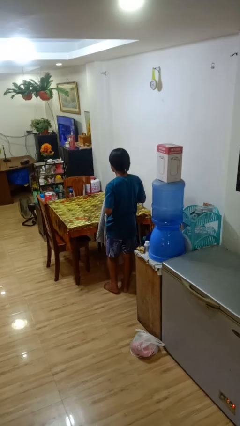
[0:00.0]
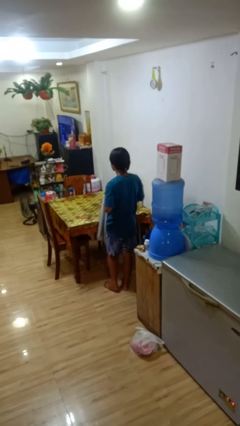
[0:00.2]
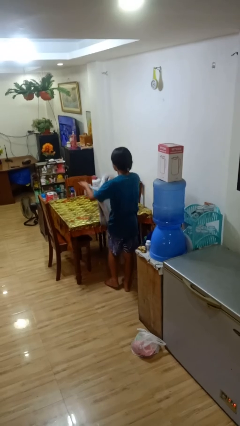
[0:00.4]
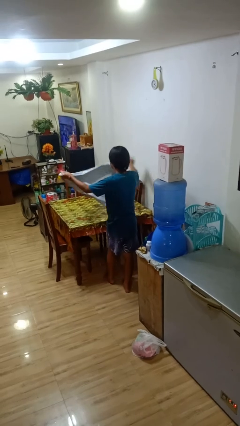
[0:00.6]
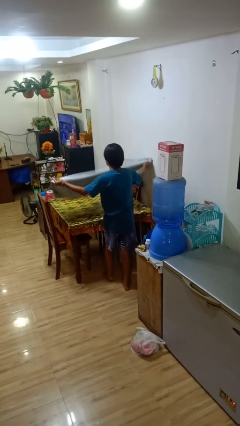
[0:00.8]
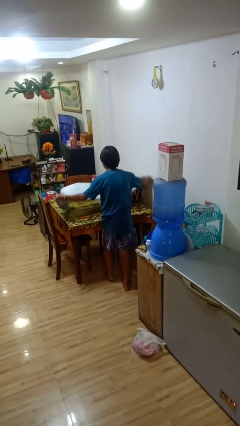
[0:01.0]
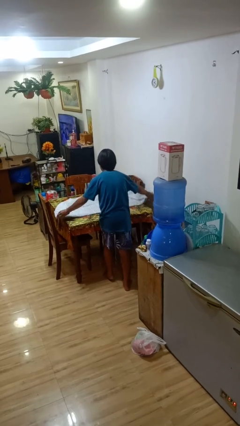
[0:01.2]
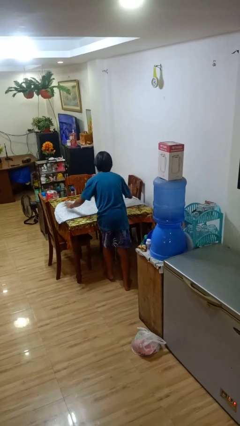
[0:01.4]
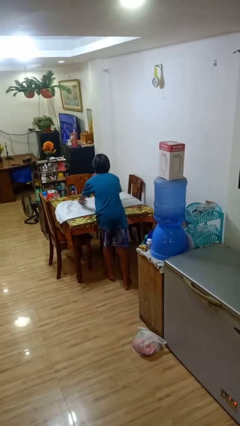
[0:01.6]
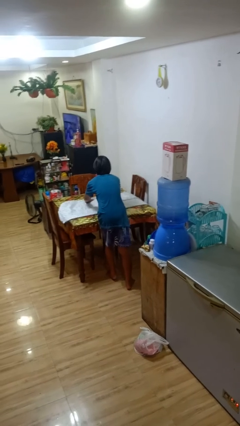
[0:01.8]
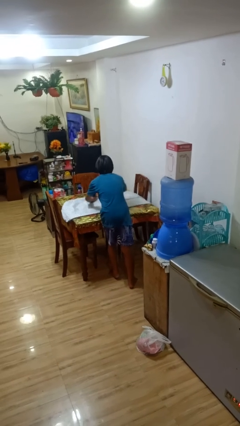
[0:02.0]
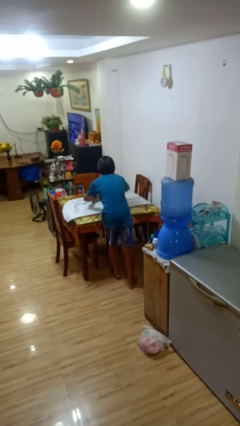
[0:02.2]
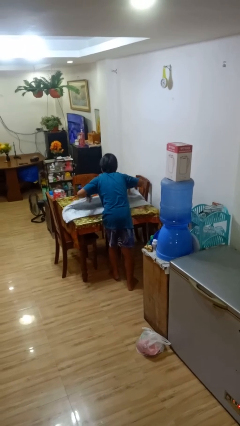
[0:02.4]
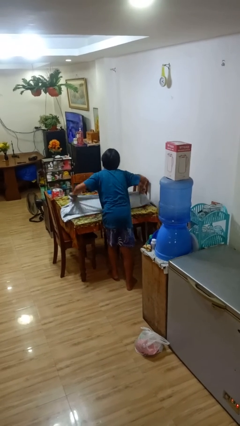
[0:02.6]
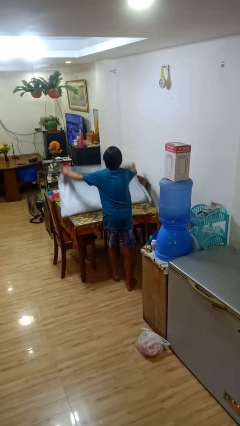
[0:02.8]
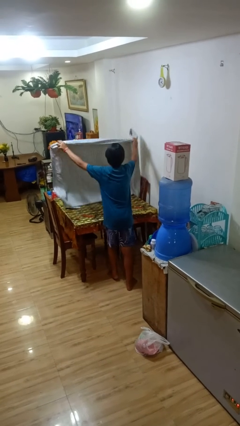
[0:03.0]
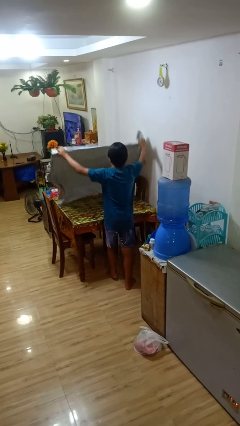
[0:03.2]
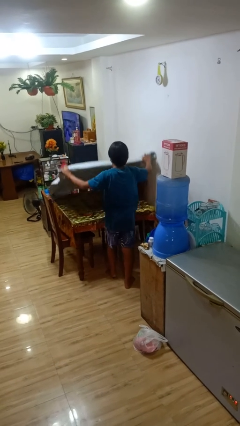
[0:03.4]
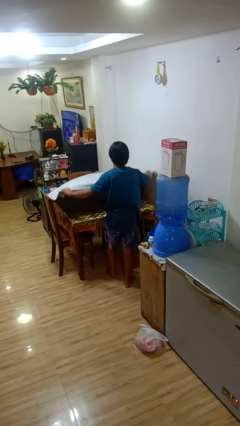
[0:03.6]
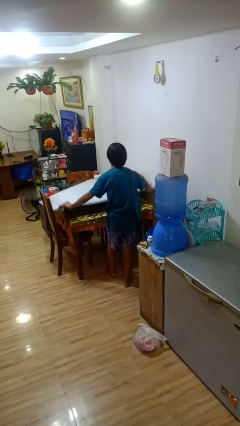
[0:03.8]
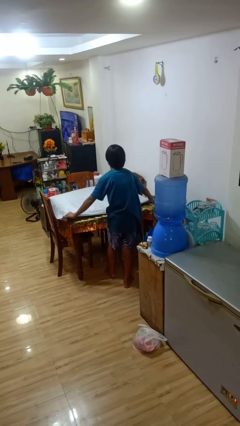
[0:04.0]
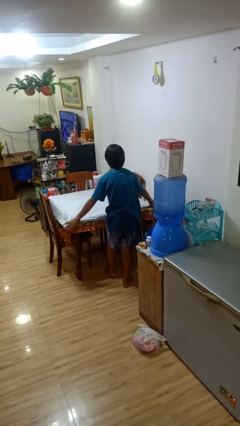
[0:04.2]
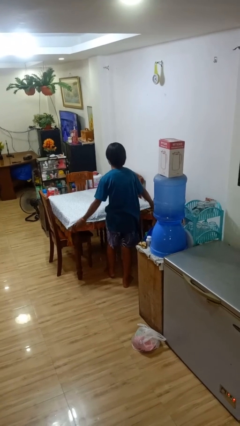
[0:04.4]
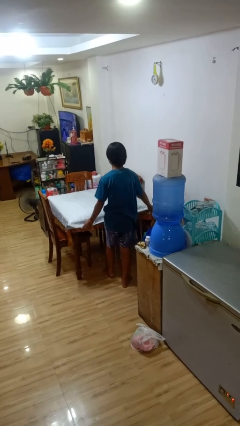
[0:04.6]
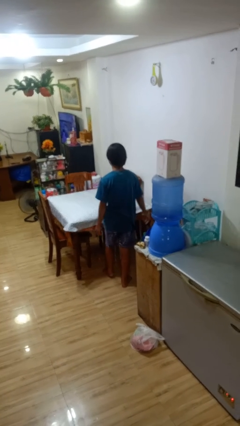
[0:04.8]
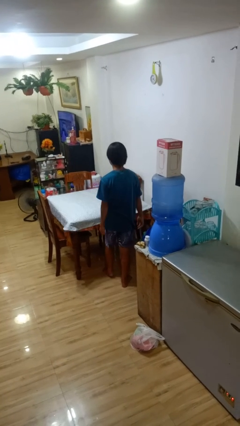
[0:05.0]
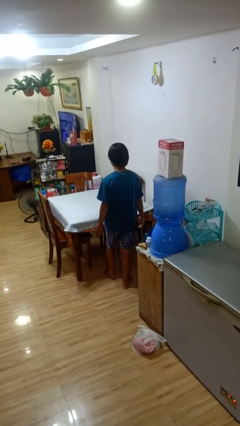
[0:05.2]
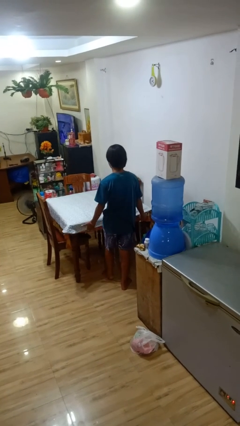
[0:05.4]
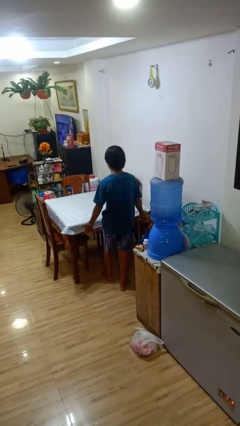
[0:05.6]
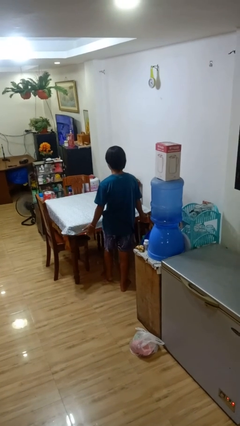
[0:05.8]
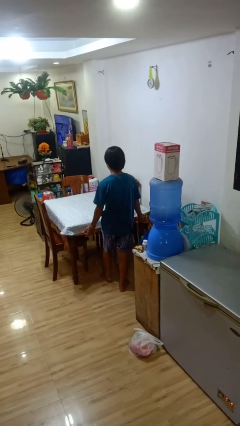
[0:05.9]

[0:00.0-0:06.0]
person spreads tablecloth

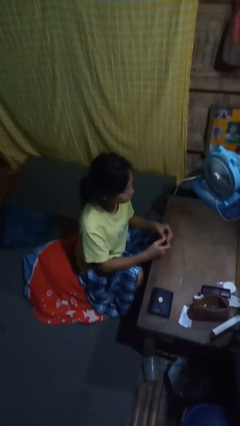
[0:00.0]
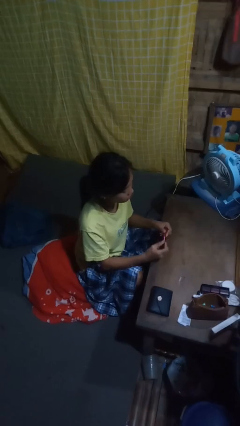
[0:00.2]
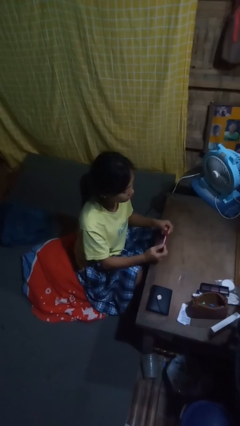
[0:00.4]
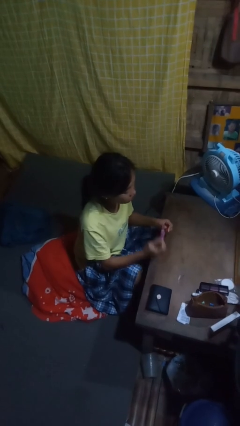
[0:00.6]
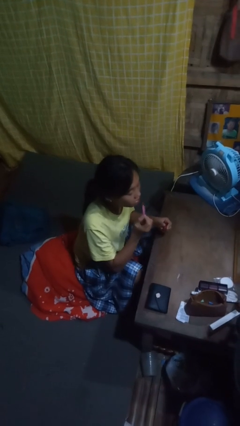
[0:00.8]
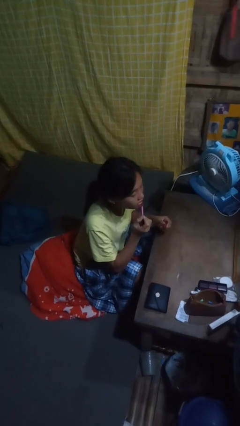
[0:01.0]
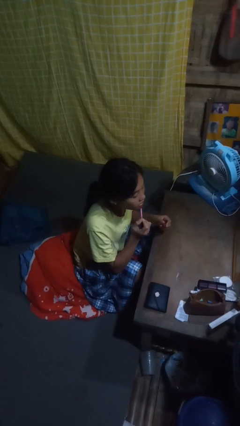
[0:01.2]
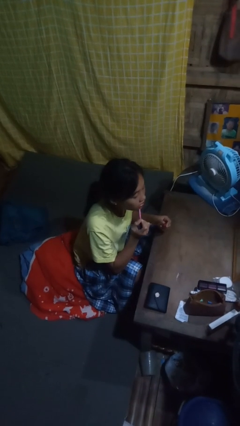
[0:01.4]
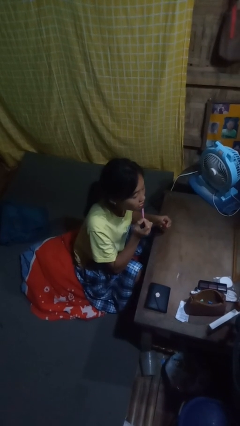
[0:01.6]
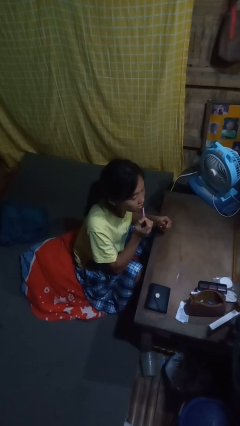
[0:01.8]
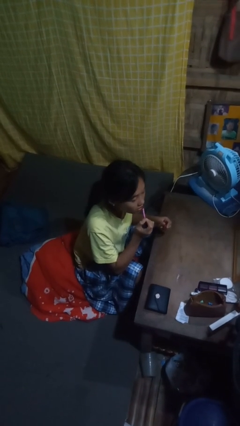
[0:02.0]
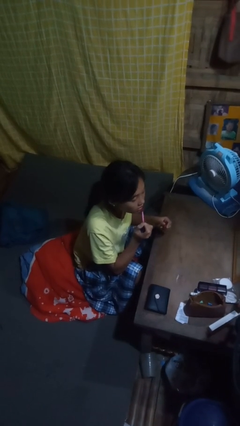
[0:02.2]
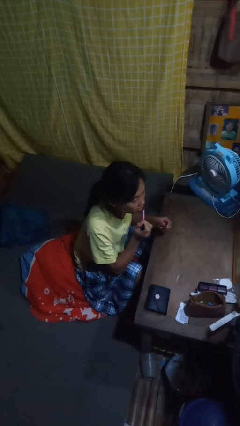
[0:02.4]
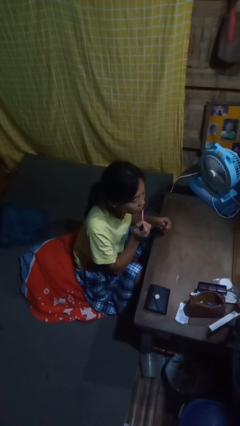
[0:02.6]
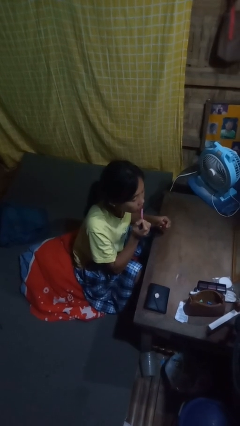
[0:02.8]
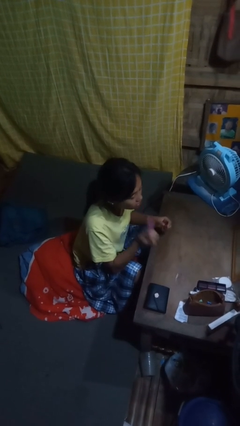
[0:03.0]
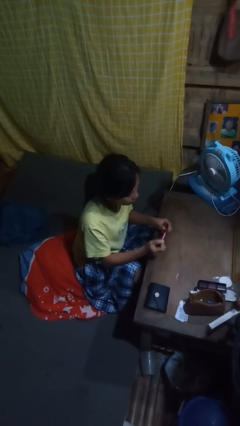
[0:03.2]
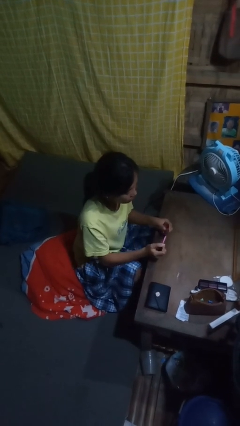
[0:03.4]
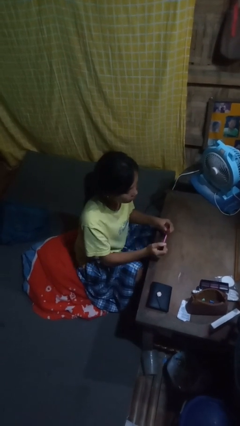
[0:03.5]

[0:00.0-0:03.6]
person applies lip makeup

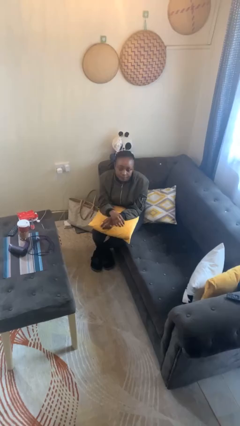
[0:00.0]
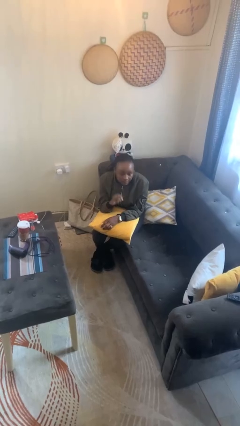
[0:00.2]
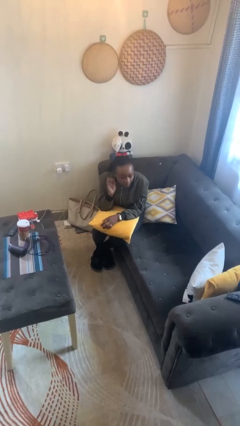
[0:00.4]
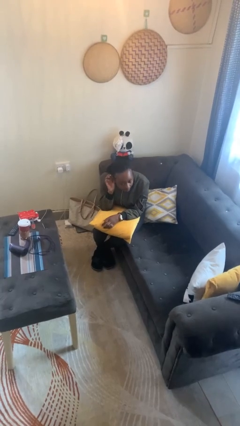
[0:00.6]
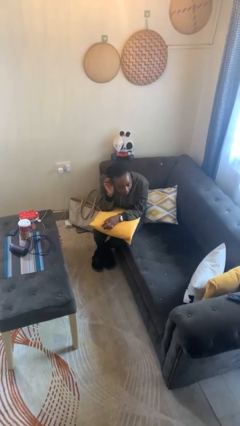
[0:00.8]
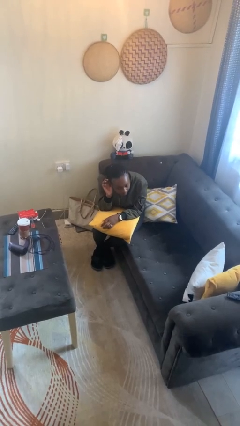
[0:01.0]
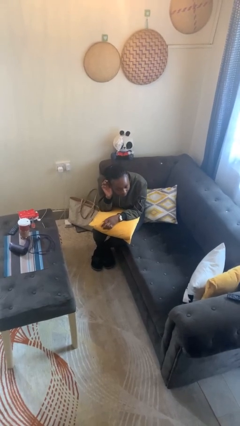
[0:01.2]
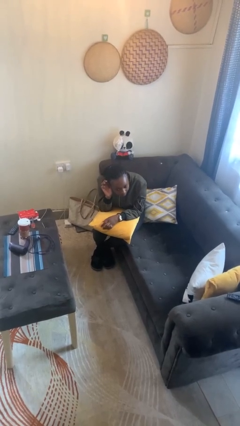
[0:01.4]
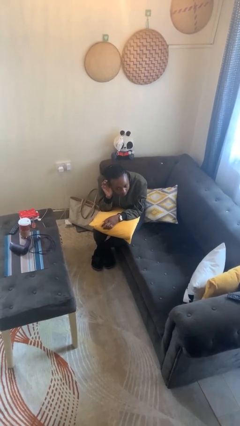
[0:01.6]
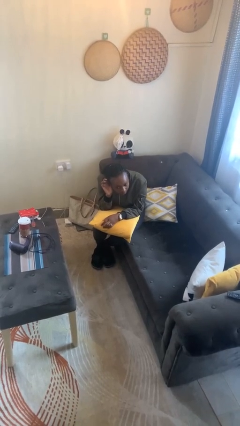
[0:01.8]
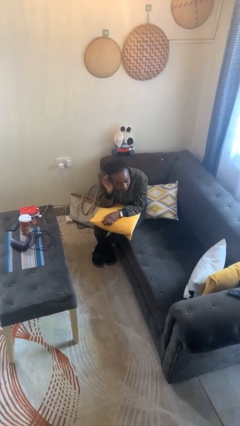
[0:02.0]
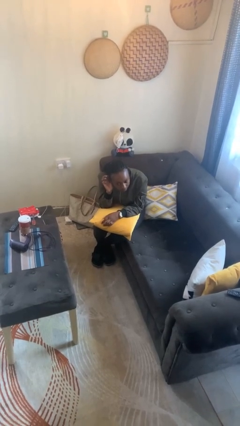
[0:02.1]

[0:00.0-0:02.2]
person gestures listen closely

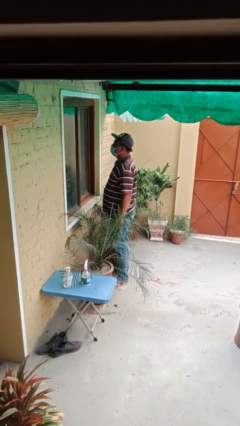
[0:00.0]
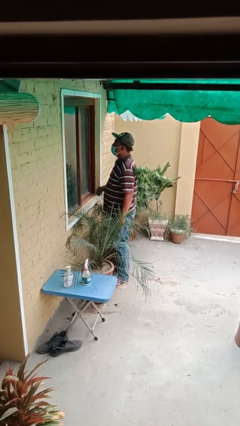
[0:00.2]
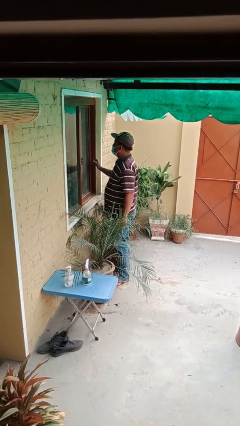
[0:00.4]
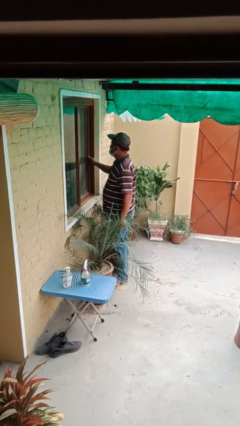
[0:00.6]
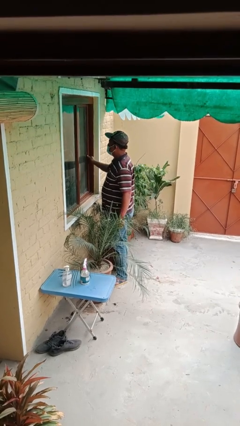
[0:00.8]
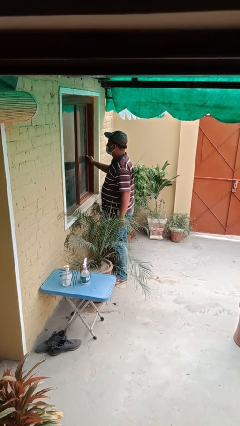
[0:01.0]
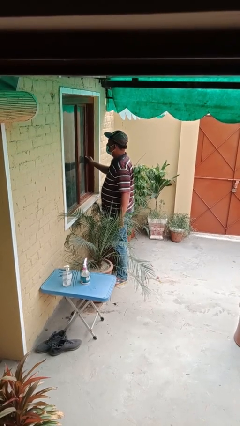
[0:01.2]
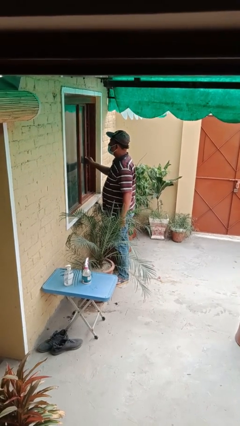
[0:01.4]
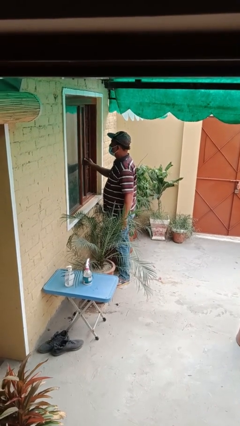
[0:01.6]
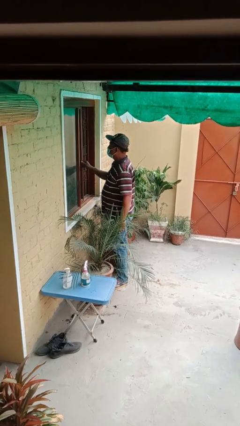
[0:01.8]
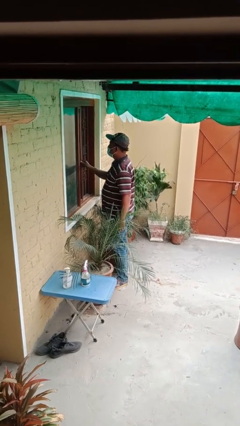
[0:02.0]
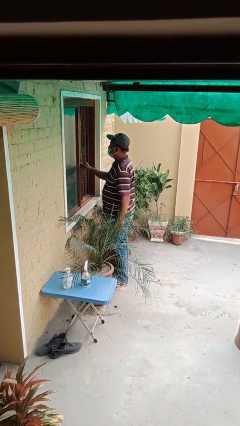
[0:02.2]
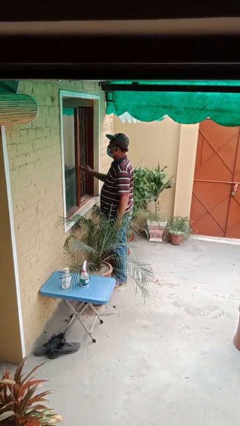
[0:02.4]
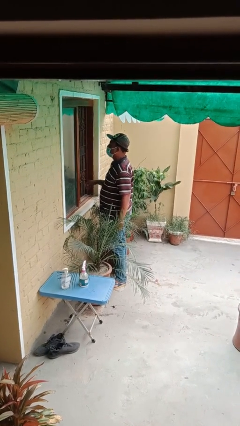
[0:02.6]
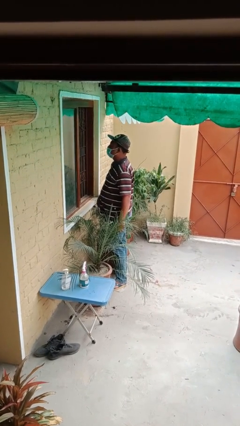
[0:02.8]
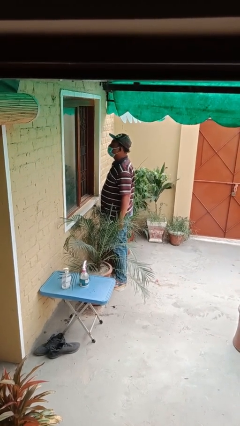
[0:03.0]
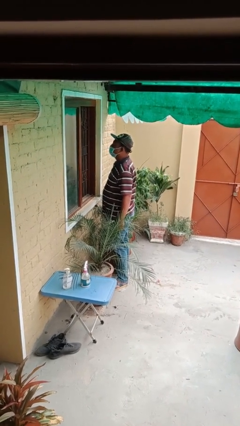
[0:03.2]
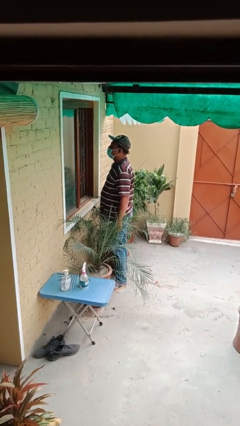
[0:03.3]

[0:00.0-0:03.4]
person opens home window

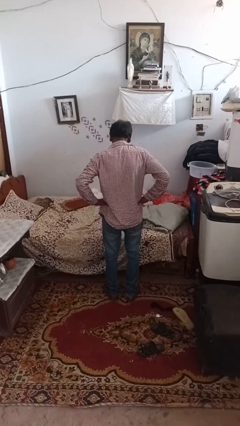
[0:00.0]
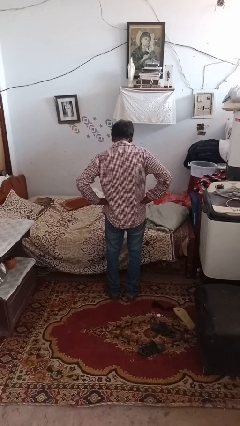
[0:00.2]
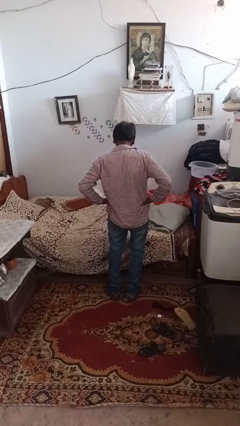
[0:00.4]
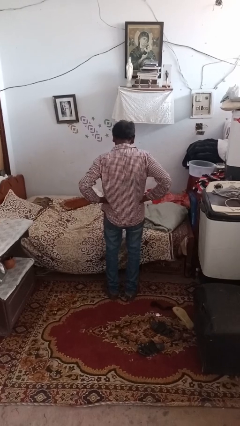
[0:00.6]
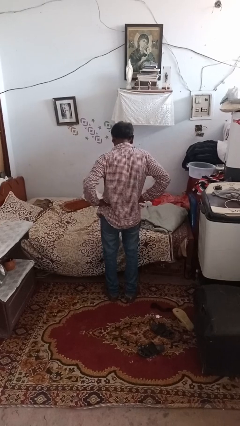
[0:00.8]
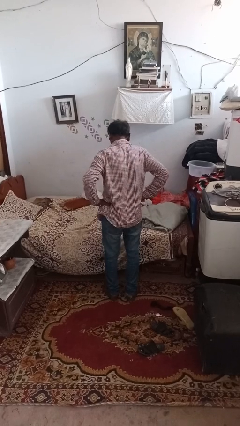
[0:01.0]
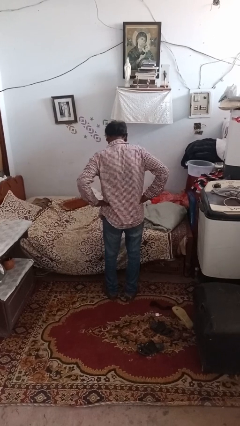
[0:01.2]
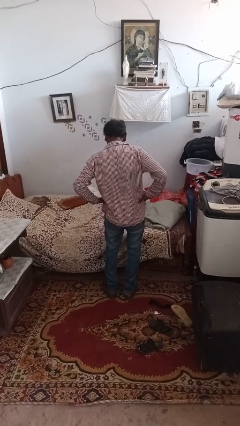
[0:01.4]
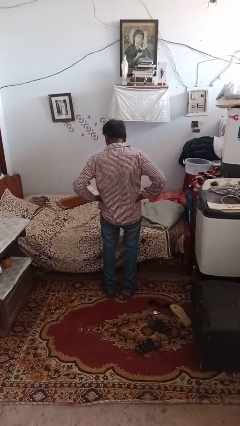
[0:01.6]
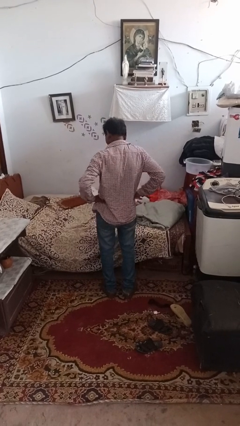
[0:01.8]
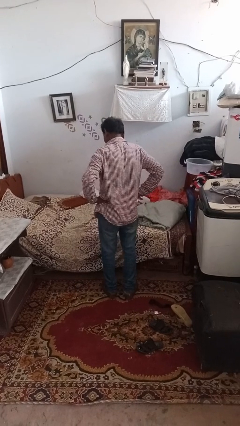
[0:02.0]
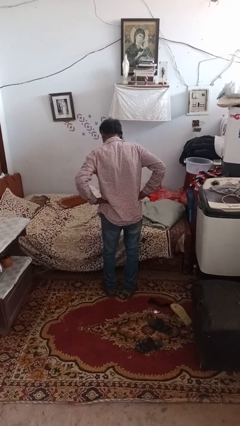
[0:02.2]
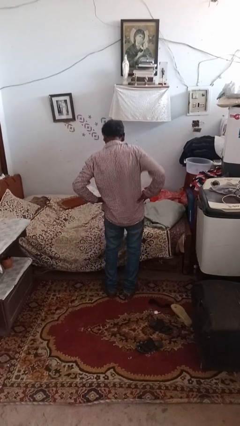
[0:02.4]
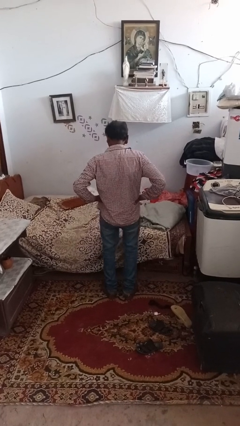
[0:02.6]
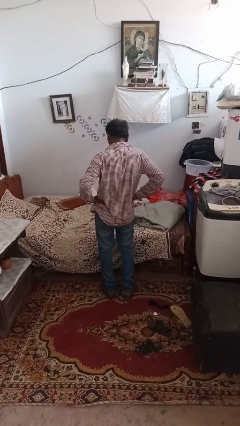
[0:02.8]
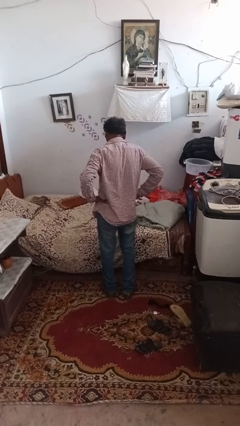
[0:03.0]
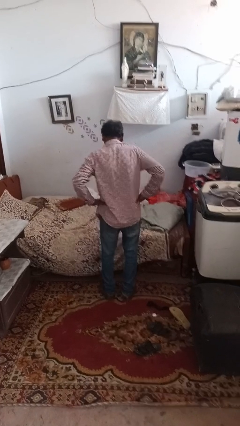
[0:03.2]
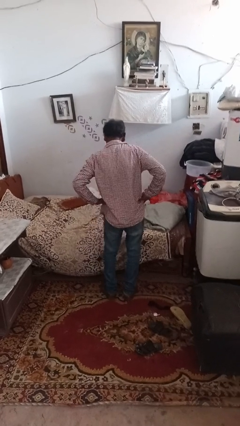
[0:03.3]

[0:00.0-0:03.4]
person wiggles hips
